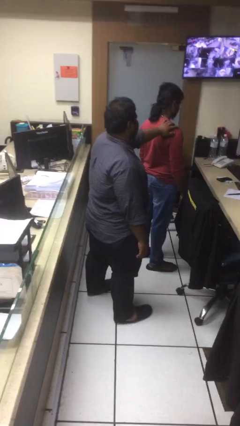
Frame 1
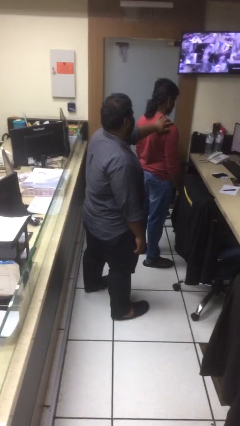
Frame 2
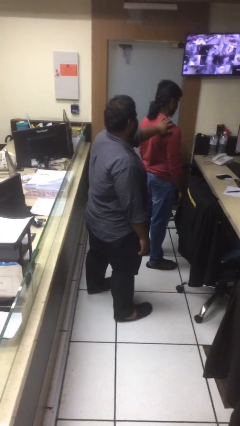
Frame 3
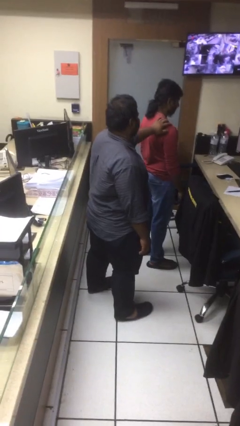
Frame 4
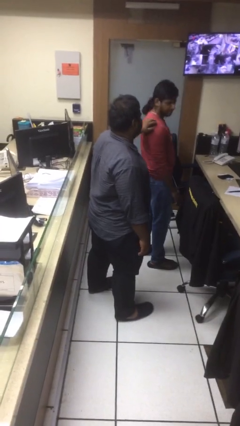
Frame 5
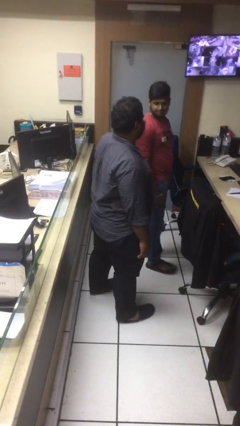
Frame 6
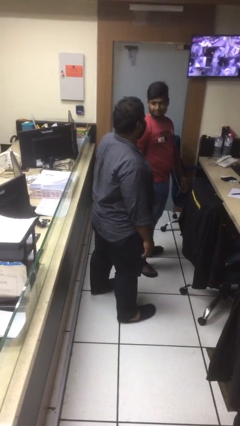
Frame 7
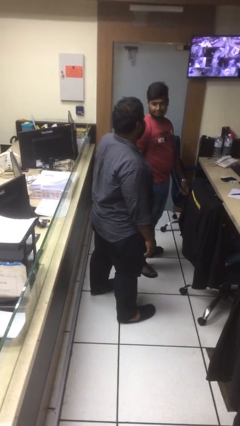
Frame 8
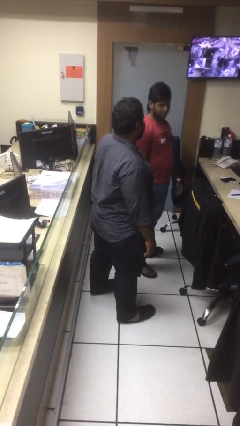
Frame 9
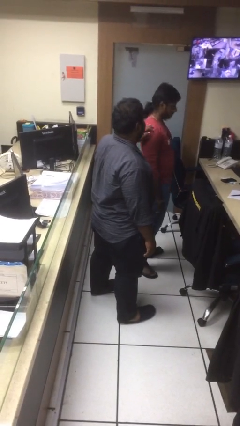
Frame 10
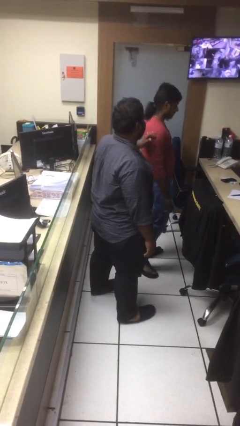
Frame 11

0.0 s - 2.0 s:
person spins person around

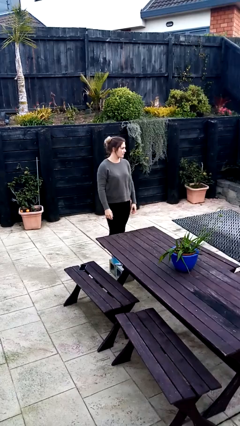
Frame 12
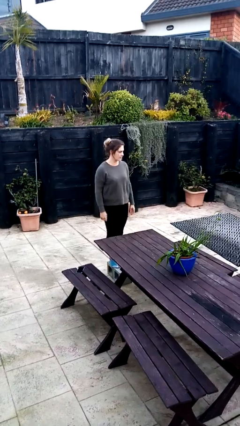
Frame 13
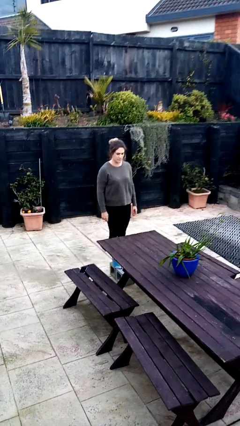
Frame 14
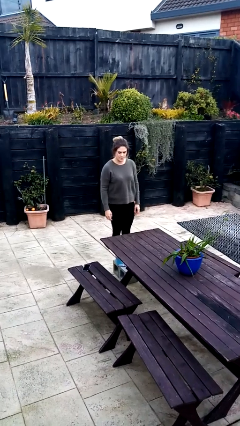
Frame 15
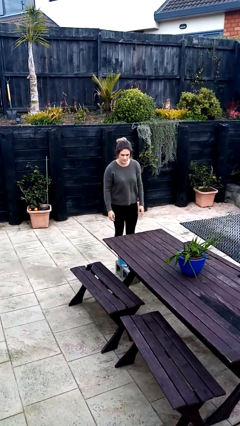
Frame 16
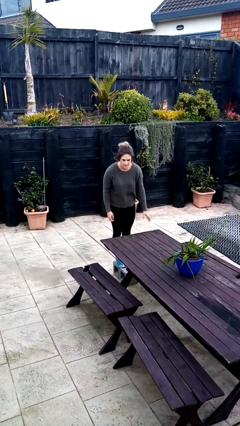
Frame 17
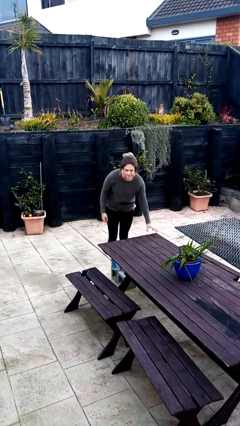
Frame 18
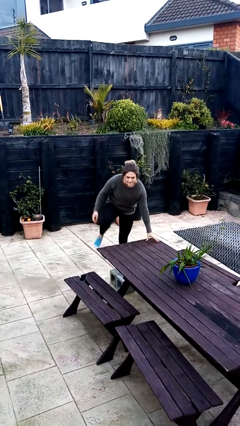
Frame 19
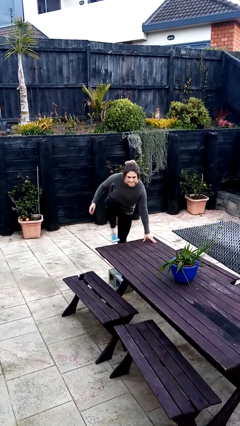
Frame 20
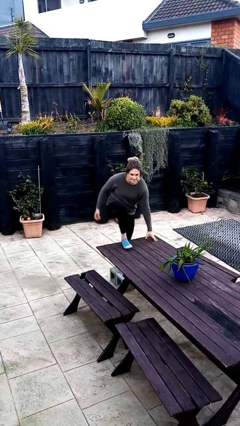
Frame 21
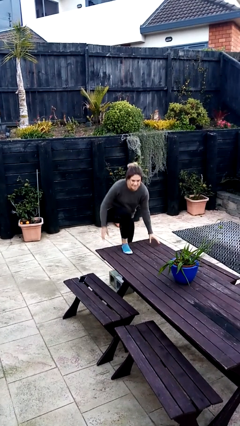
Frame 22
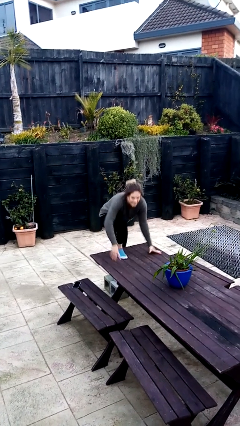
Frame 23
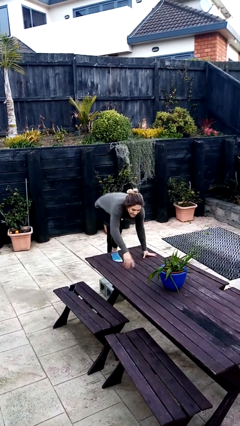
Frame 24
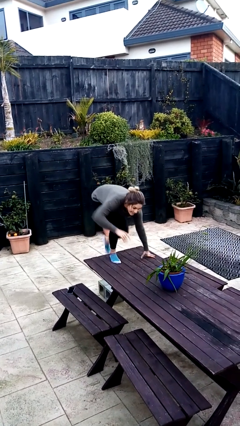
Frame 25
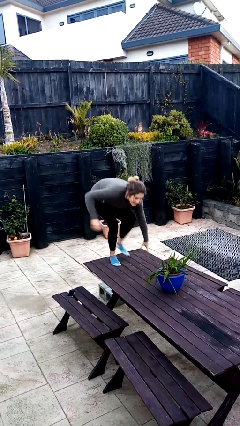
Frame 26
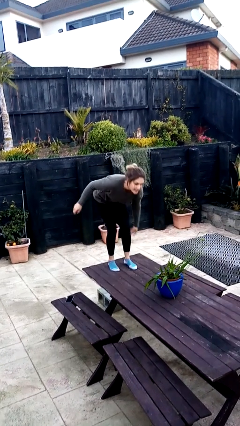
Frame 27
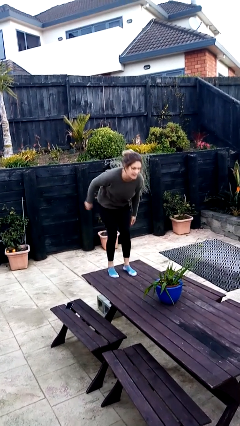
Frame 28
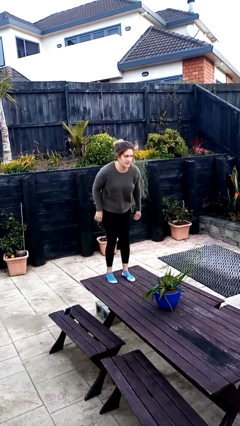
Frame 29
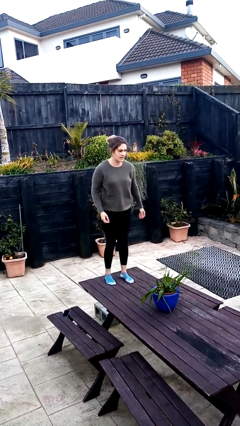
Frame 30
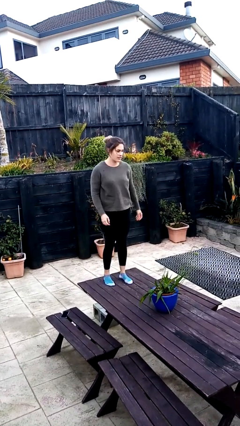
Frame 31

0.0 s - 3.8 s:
person climbs on table

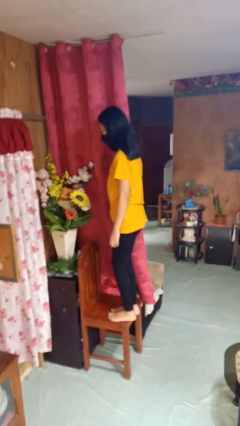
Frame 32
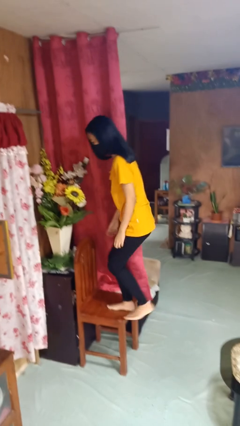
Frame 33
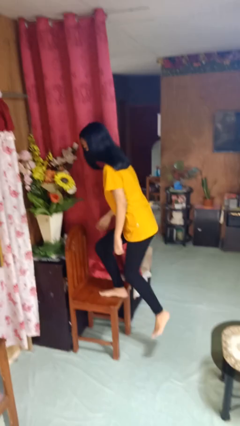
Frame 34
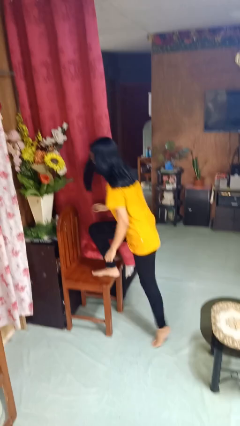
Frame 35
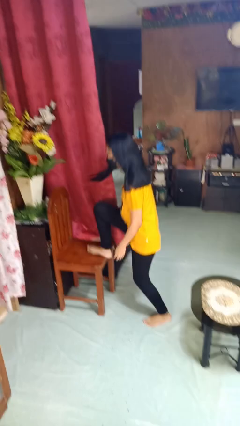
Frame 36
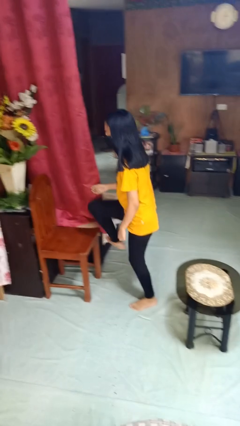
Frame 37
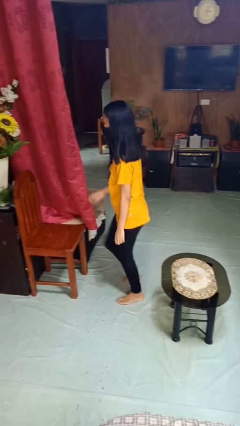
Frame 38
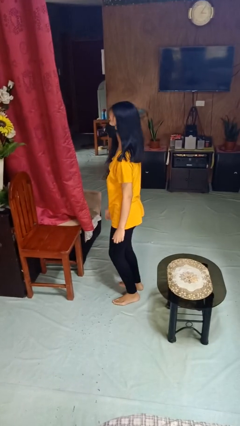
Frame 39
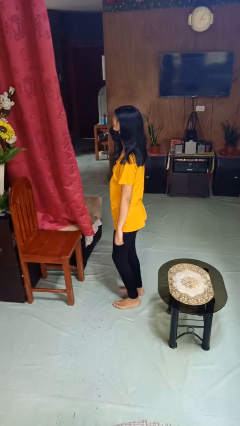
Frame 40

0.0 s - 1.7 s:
person climbs off chair

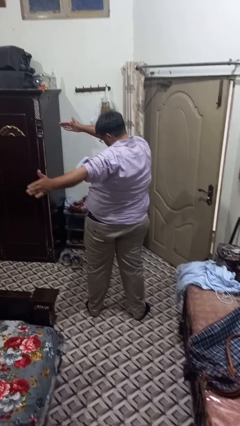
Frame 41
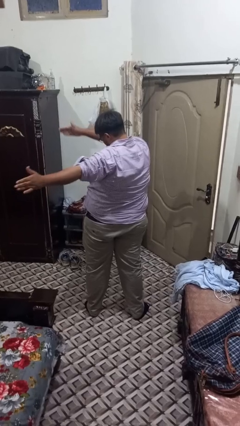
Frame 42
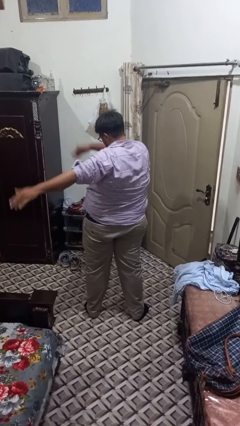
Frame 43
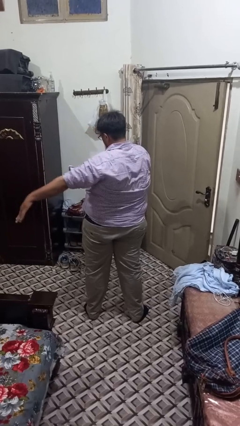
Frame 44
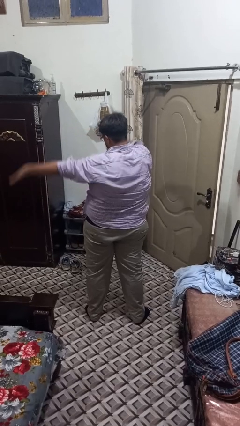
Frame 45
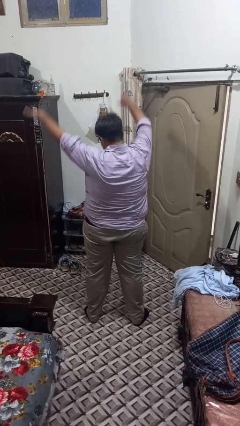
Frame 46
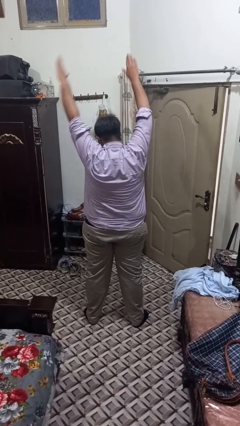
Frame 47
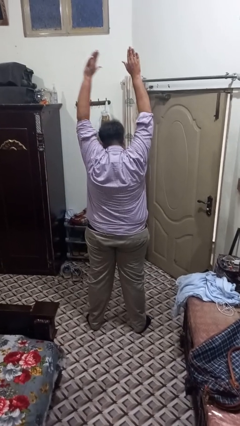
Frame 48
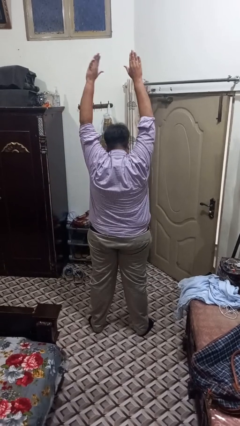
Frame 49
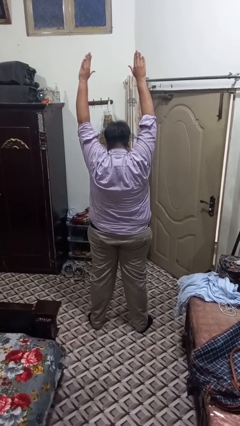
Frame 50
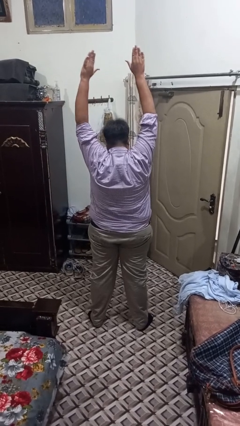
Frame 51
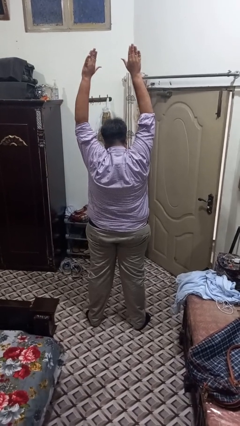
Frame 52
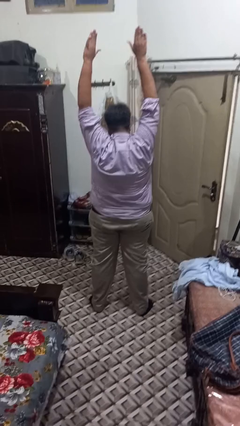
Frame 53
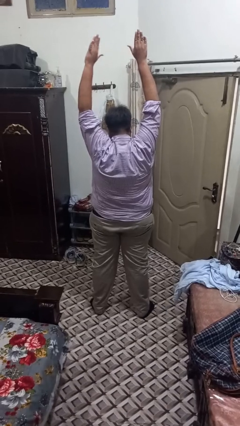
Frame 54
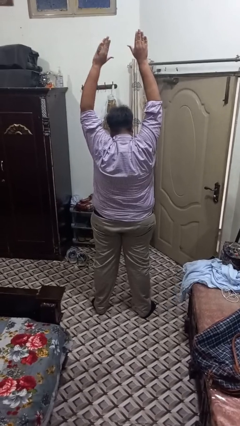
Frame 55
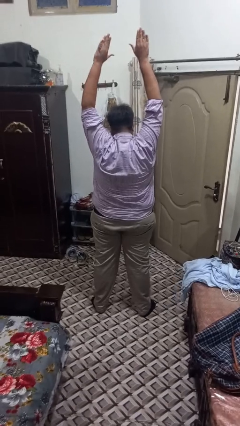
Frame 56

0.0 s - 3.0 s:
person stretches arms over head

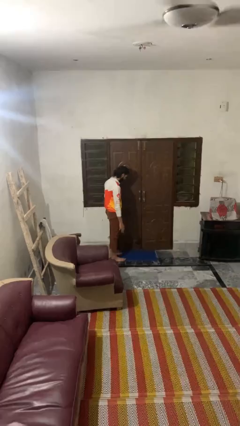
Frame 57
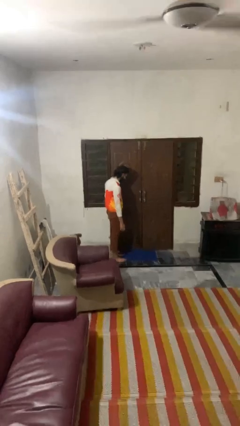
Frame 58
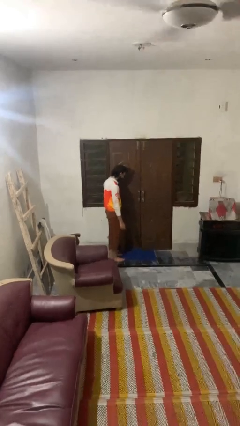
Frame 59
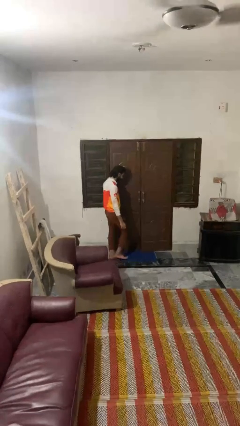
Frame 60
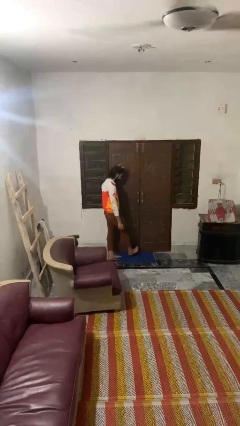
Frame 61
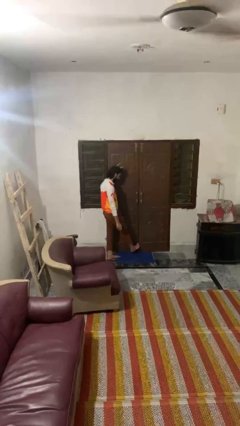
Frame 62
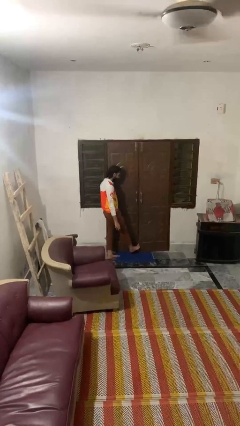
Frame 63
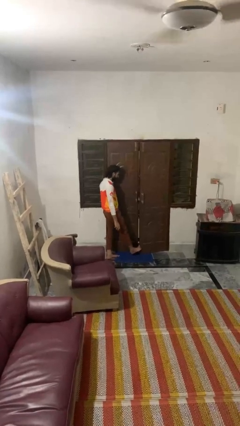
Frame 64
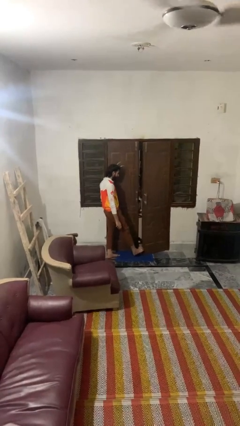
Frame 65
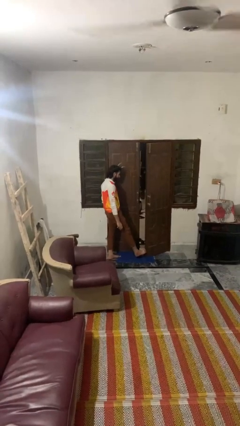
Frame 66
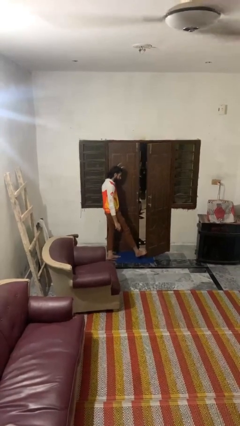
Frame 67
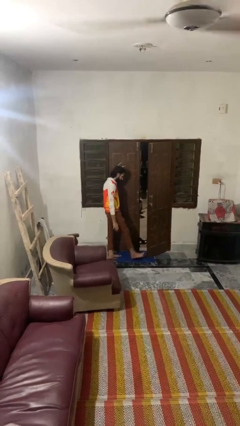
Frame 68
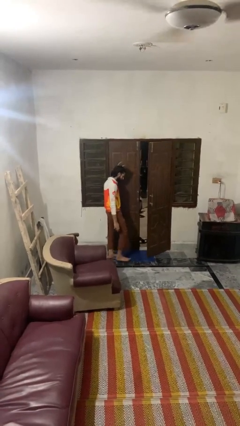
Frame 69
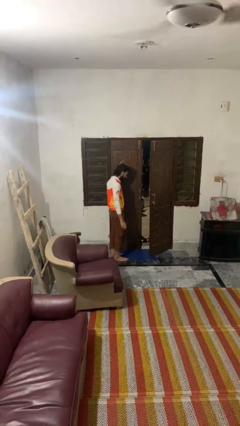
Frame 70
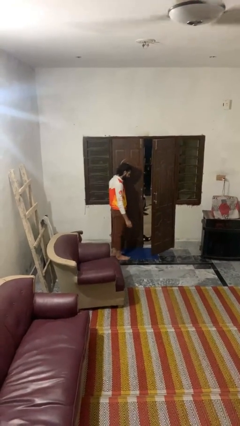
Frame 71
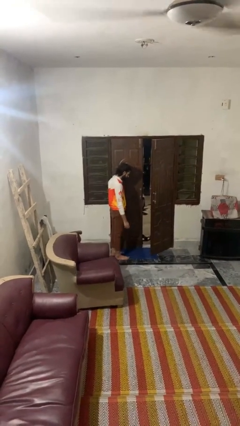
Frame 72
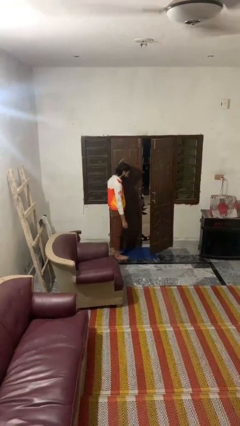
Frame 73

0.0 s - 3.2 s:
person opens facility door

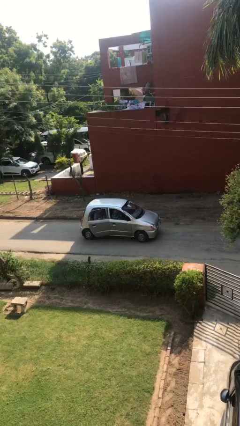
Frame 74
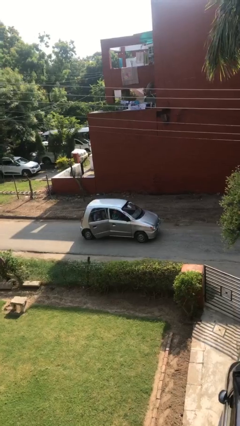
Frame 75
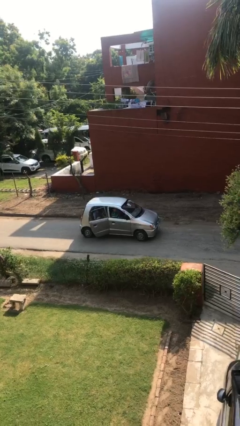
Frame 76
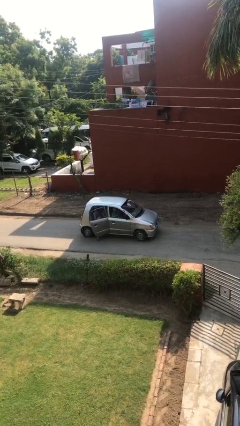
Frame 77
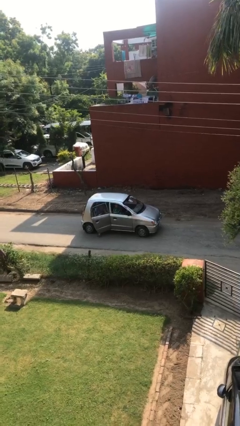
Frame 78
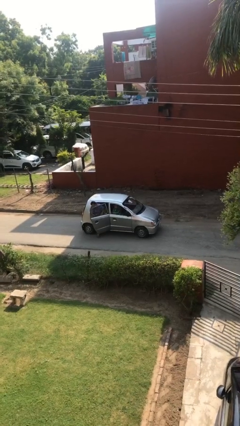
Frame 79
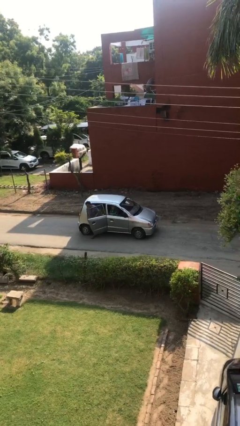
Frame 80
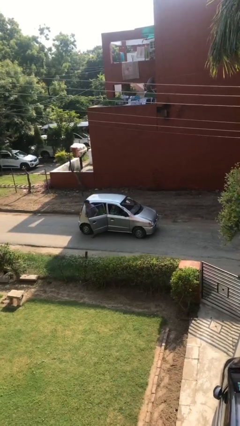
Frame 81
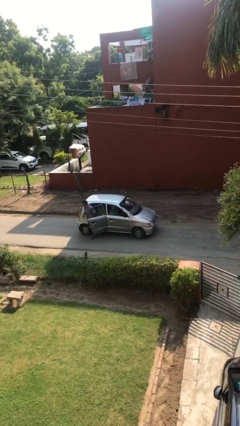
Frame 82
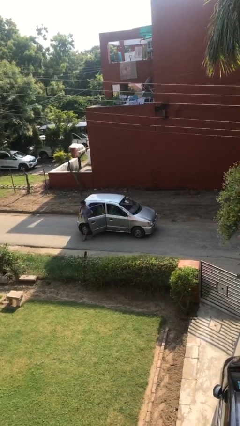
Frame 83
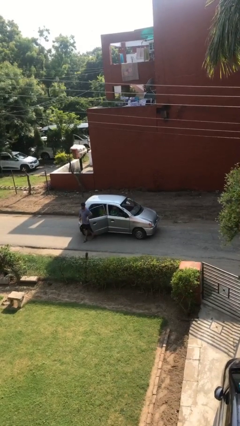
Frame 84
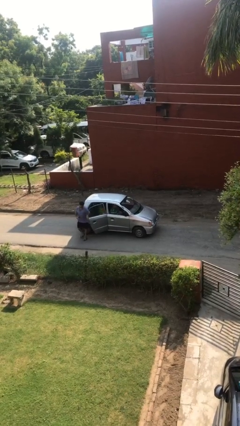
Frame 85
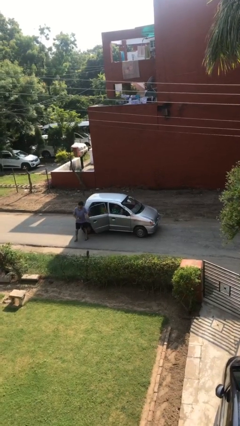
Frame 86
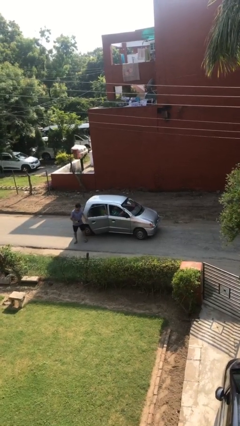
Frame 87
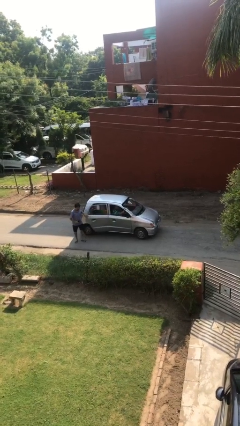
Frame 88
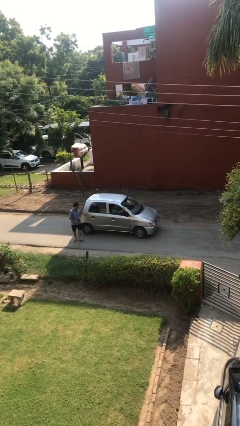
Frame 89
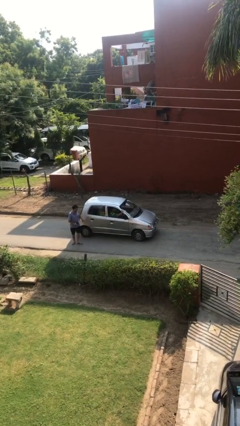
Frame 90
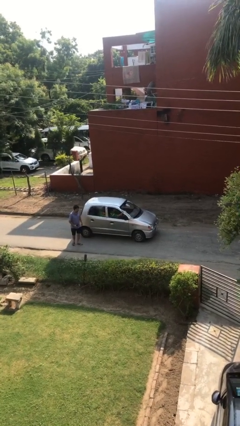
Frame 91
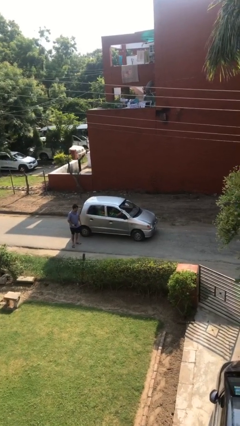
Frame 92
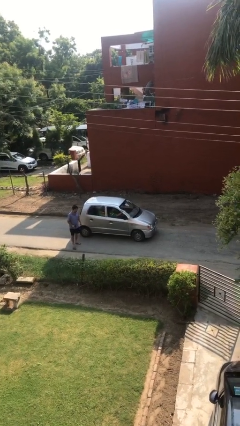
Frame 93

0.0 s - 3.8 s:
car drops off person

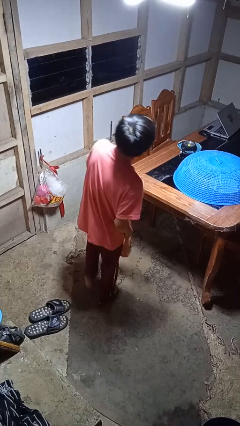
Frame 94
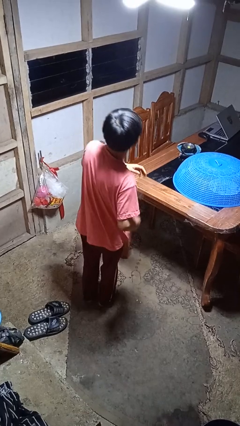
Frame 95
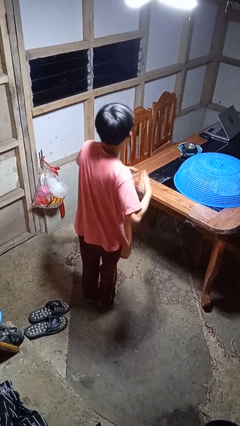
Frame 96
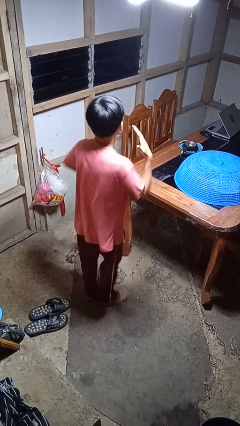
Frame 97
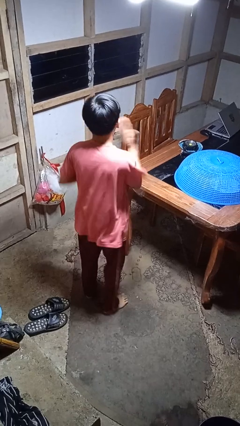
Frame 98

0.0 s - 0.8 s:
person karate chop
